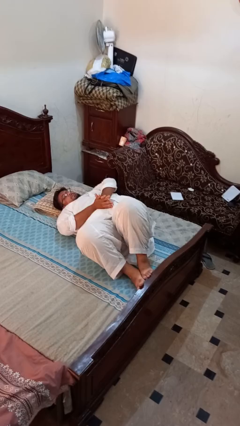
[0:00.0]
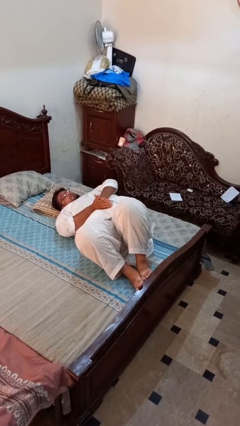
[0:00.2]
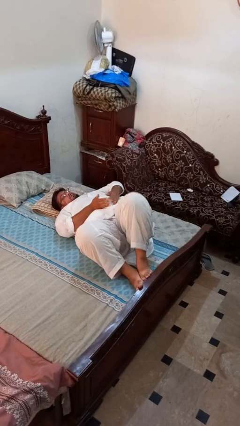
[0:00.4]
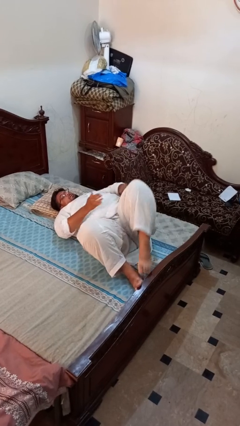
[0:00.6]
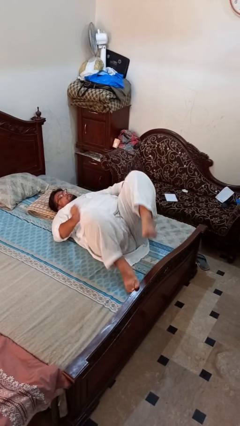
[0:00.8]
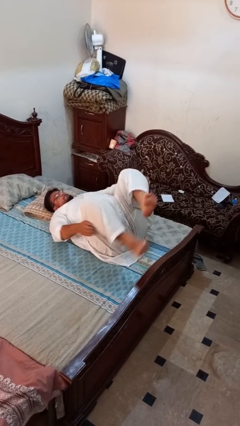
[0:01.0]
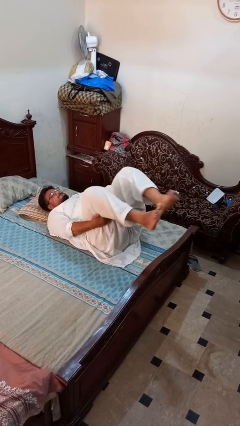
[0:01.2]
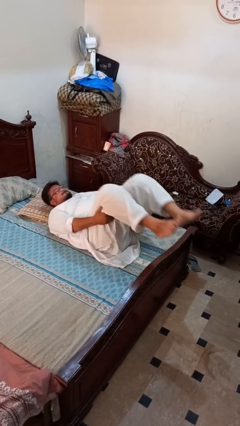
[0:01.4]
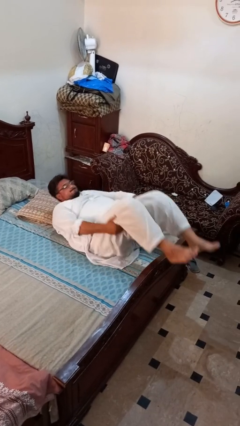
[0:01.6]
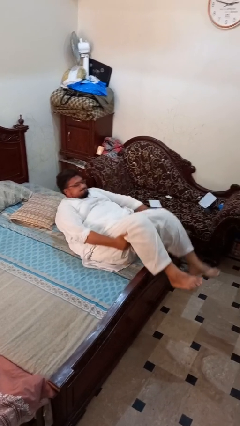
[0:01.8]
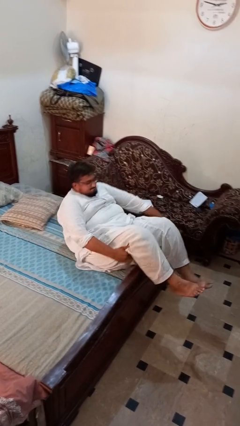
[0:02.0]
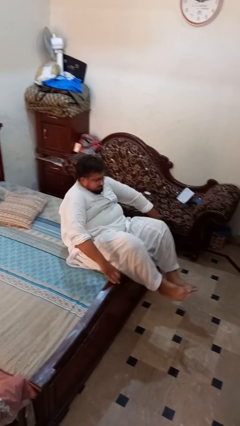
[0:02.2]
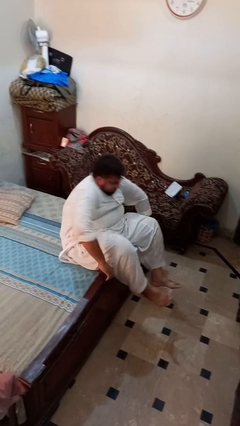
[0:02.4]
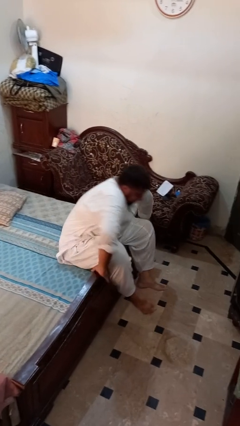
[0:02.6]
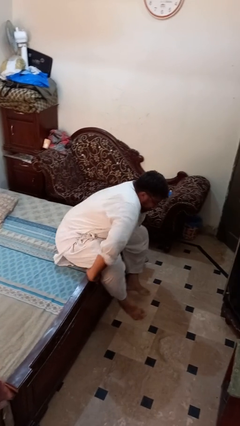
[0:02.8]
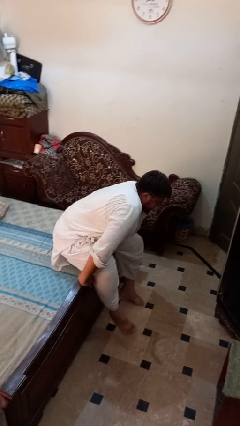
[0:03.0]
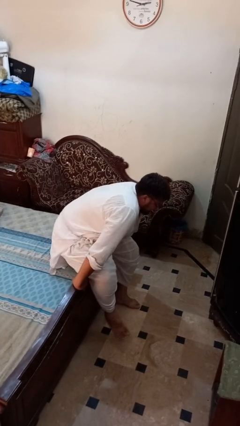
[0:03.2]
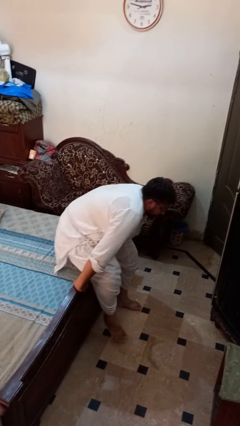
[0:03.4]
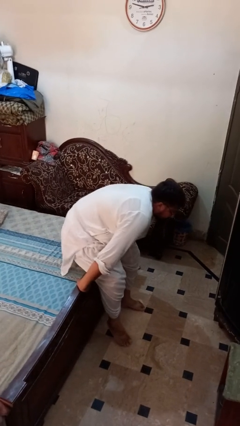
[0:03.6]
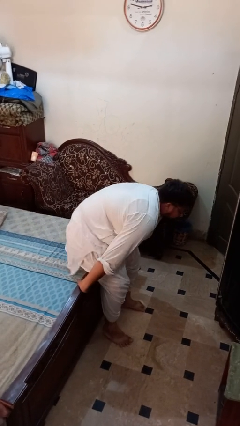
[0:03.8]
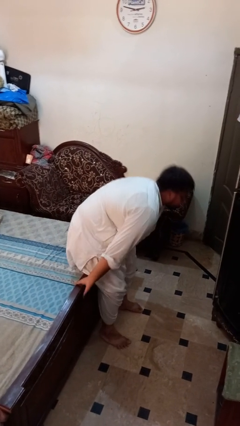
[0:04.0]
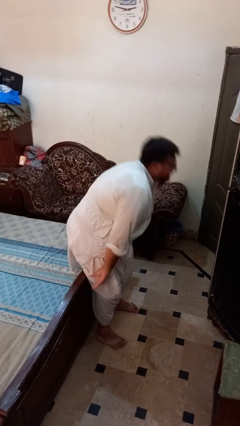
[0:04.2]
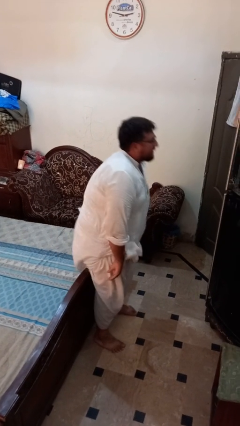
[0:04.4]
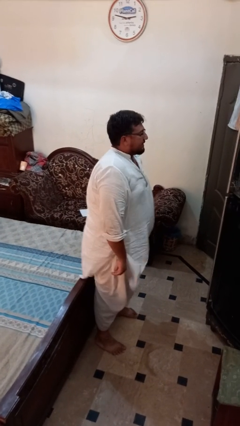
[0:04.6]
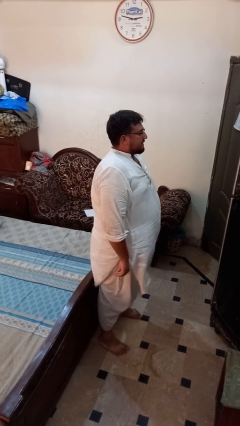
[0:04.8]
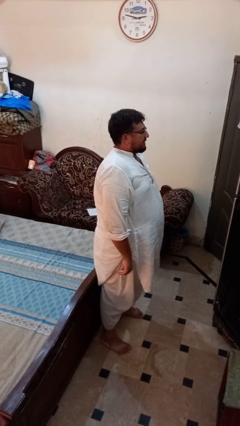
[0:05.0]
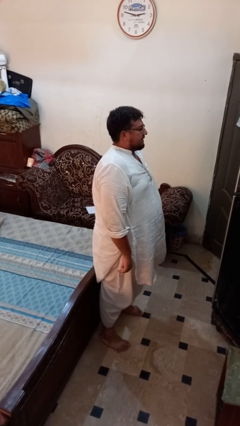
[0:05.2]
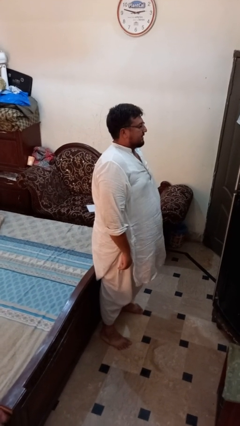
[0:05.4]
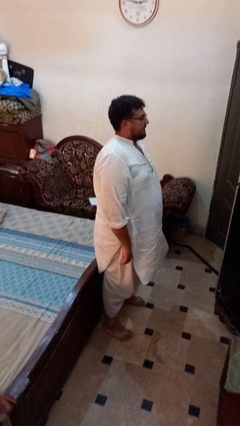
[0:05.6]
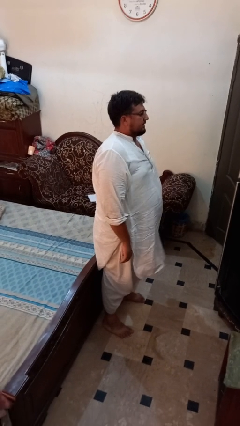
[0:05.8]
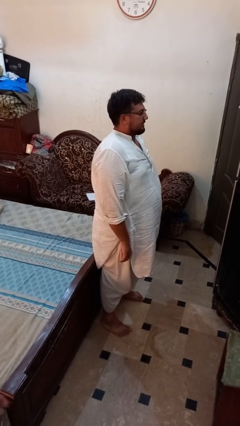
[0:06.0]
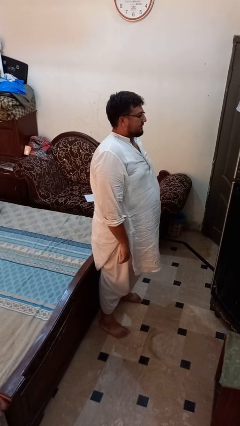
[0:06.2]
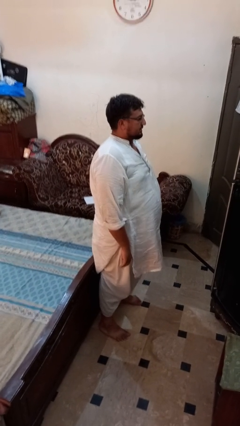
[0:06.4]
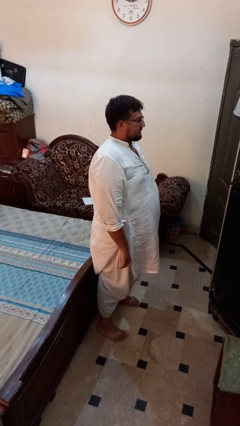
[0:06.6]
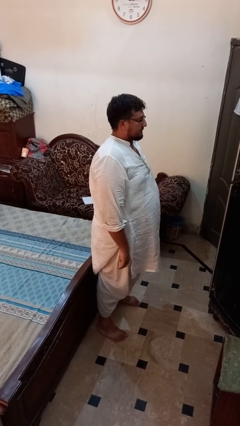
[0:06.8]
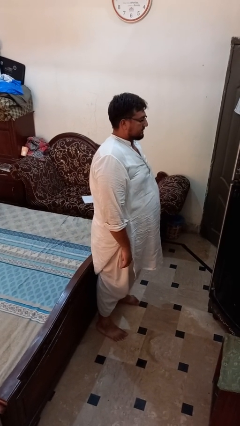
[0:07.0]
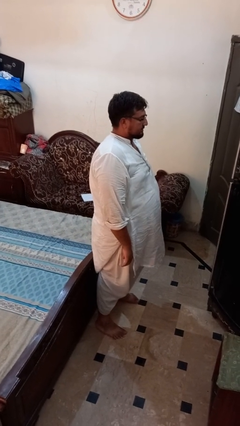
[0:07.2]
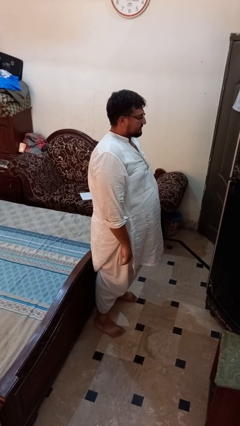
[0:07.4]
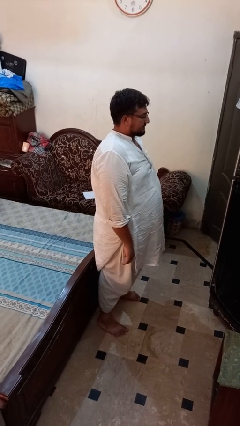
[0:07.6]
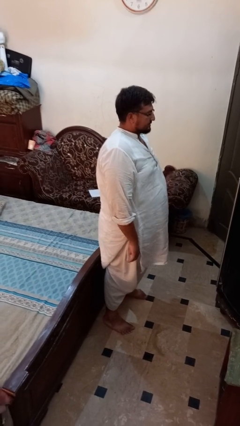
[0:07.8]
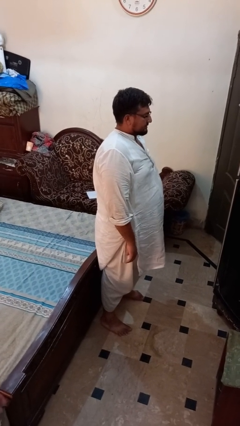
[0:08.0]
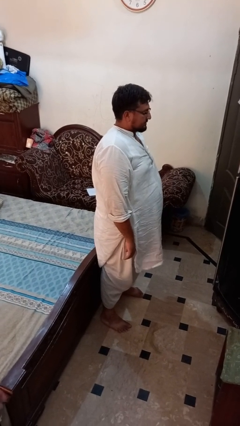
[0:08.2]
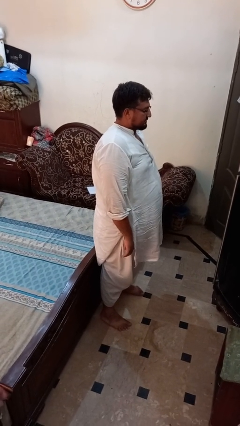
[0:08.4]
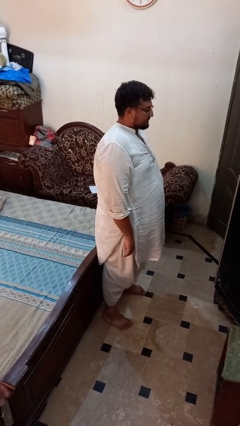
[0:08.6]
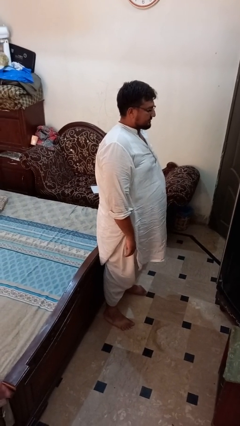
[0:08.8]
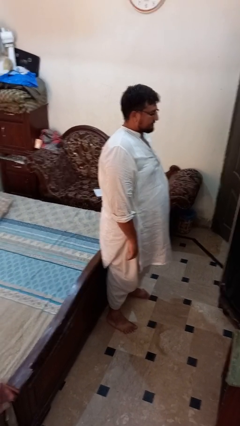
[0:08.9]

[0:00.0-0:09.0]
person stands up

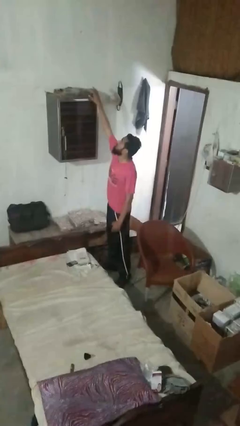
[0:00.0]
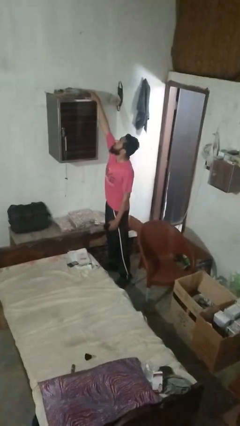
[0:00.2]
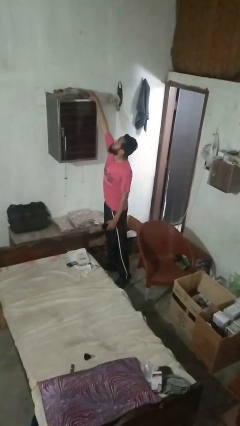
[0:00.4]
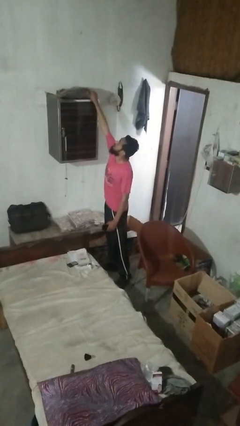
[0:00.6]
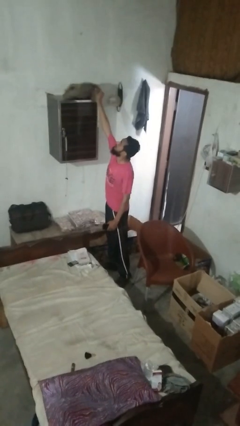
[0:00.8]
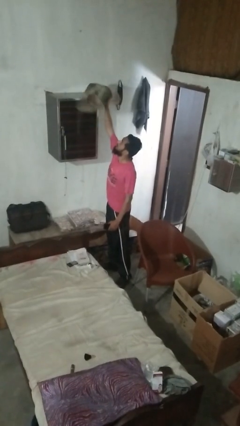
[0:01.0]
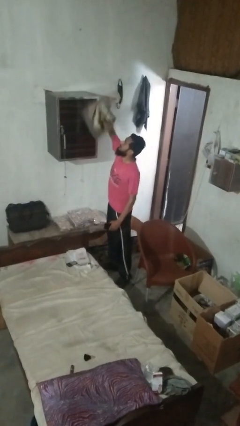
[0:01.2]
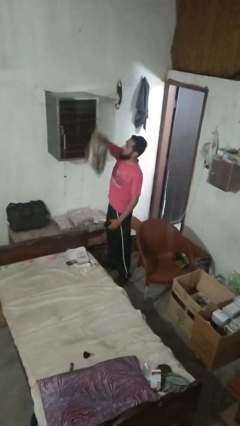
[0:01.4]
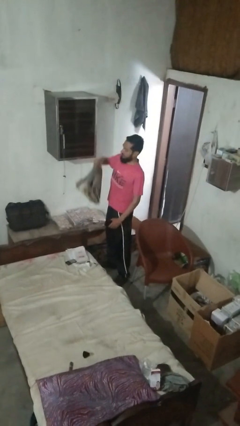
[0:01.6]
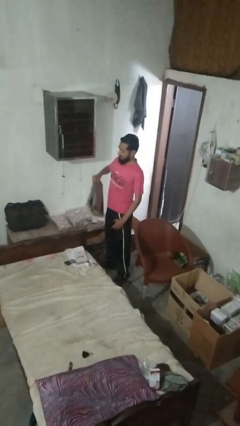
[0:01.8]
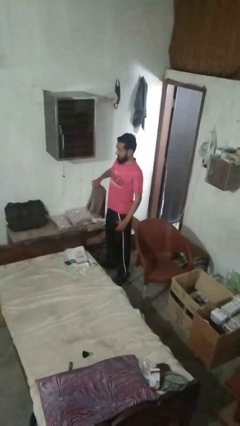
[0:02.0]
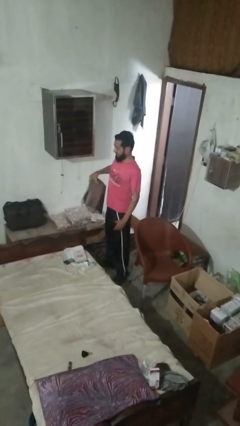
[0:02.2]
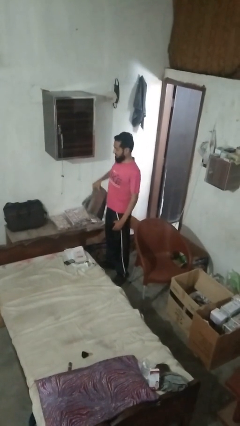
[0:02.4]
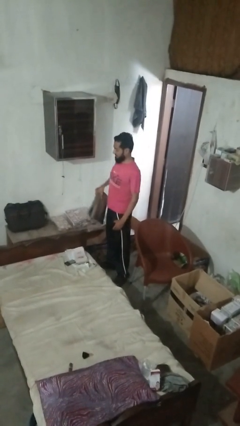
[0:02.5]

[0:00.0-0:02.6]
person picks up object from shelf

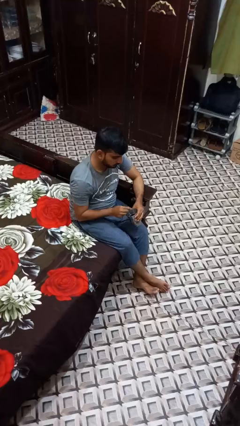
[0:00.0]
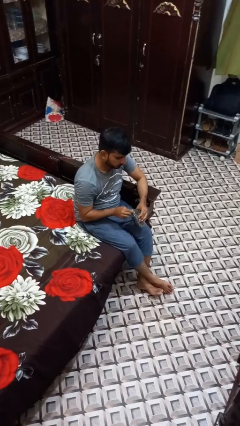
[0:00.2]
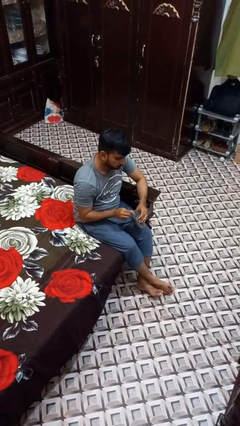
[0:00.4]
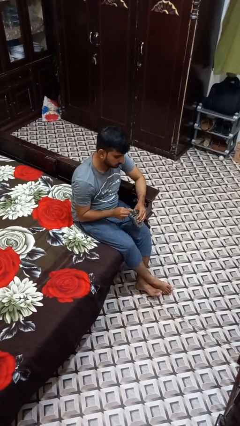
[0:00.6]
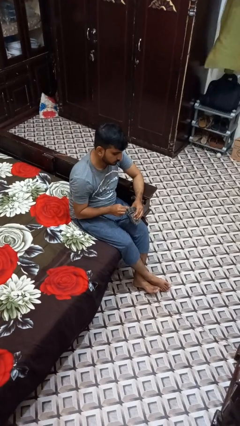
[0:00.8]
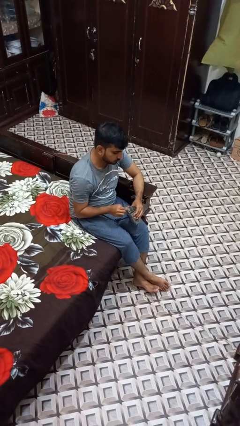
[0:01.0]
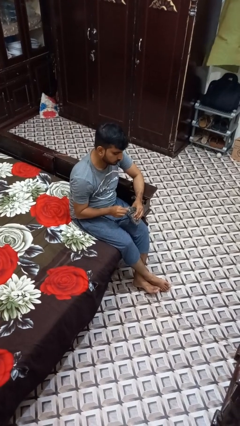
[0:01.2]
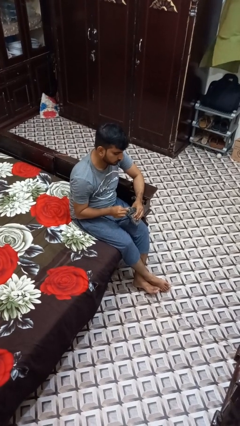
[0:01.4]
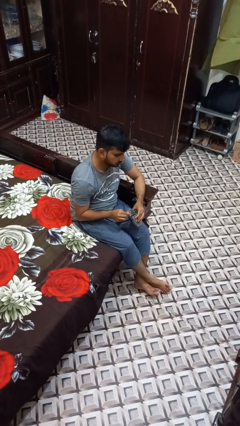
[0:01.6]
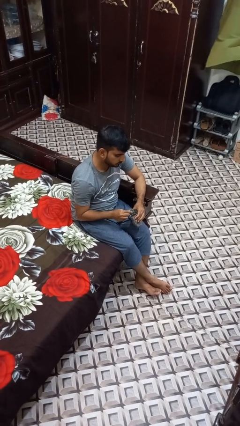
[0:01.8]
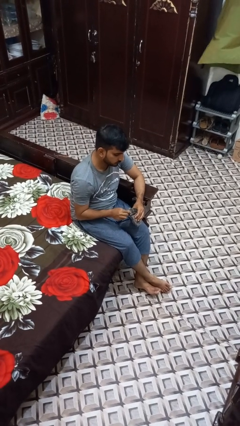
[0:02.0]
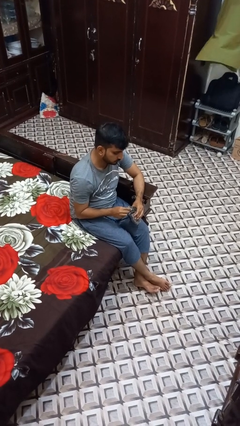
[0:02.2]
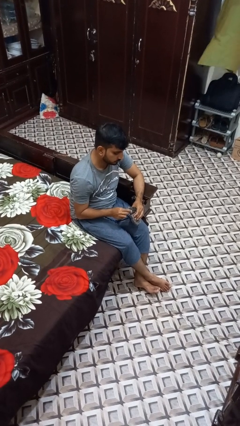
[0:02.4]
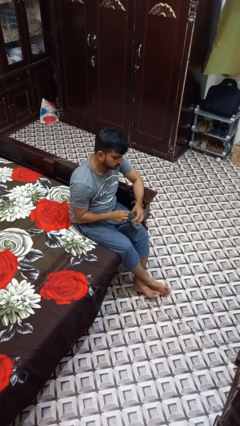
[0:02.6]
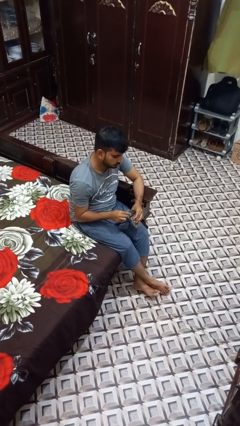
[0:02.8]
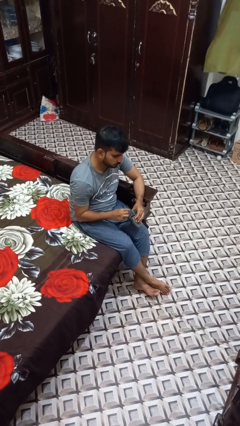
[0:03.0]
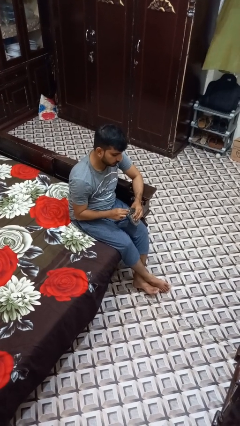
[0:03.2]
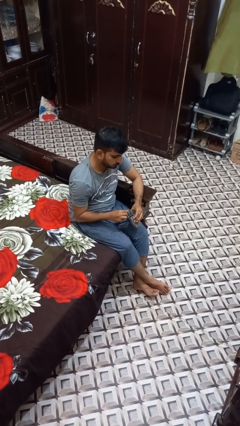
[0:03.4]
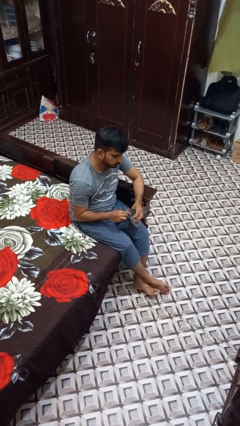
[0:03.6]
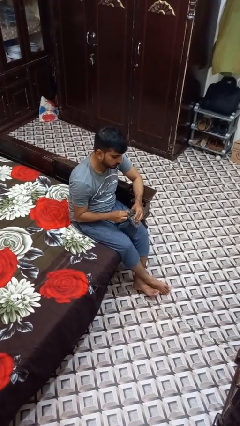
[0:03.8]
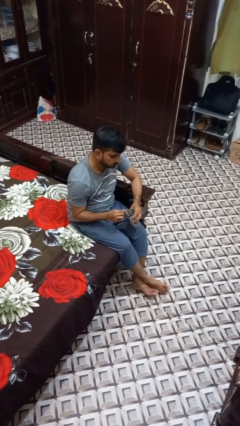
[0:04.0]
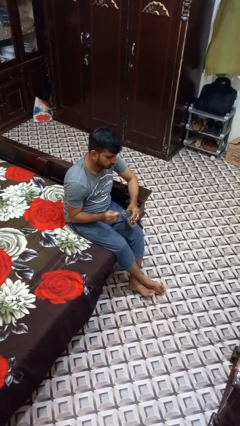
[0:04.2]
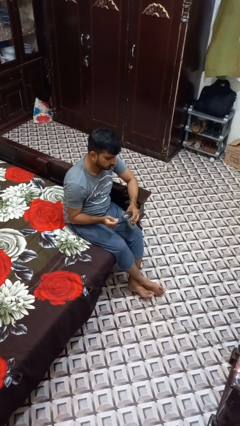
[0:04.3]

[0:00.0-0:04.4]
person stirs mug

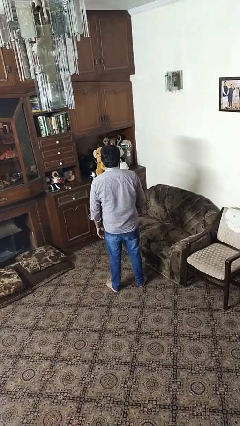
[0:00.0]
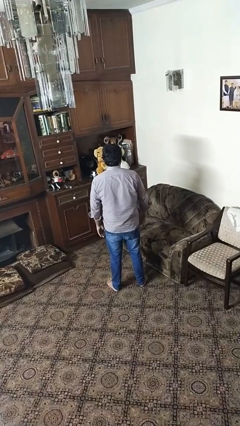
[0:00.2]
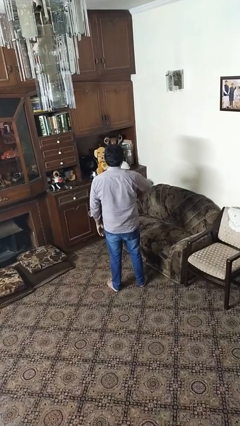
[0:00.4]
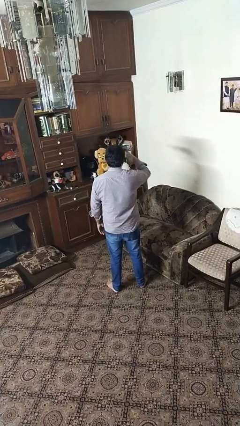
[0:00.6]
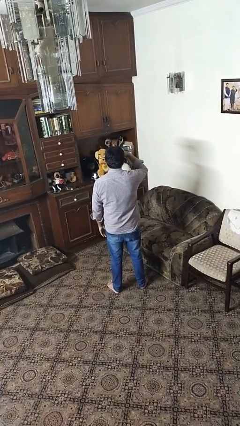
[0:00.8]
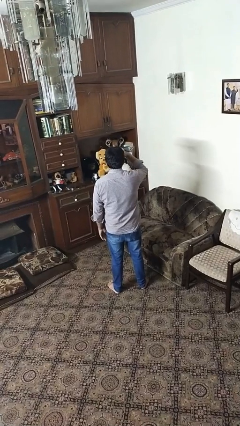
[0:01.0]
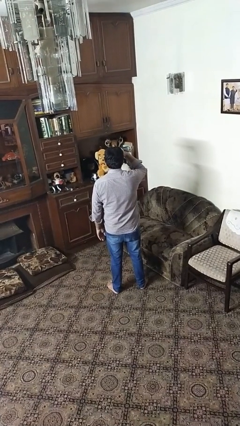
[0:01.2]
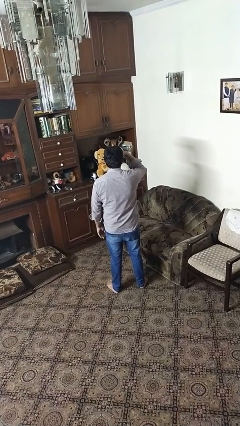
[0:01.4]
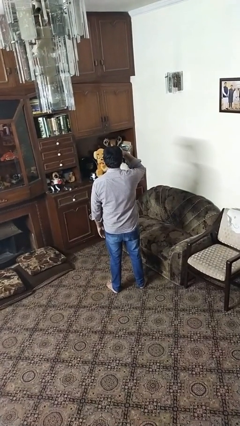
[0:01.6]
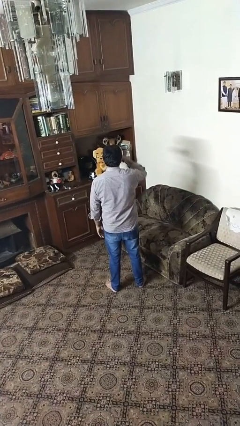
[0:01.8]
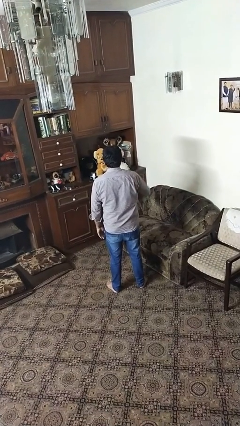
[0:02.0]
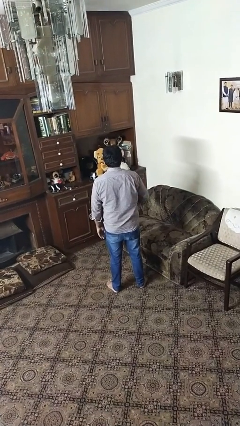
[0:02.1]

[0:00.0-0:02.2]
person salutes
